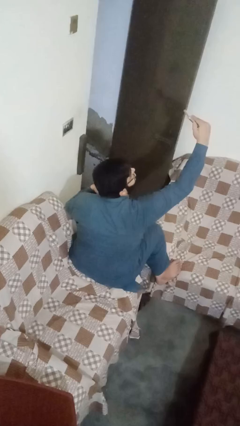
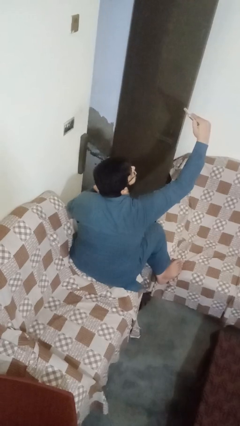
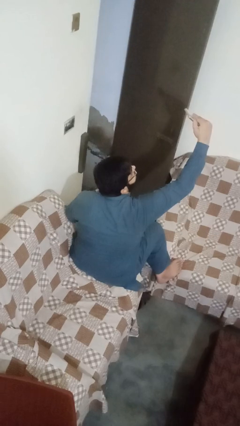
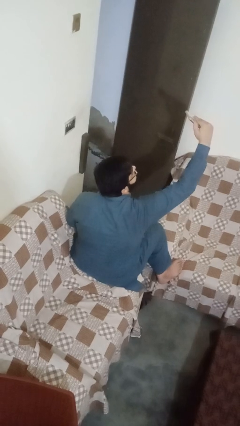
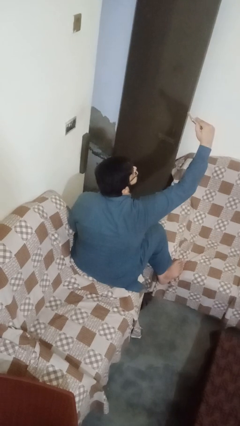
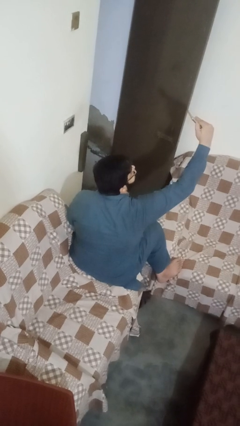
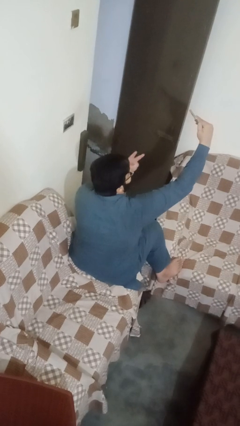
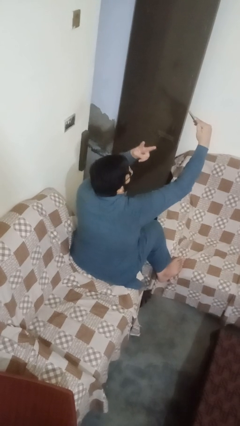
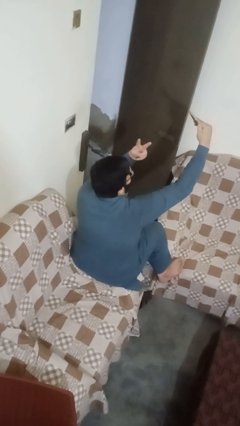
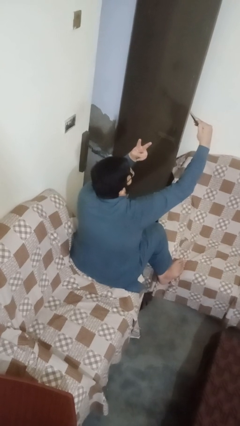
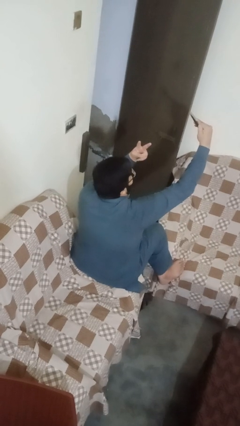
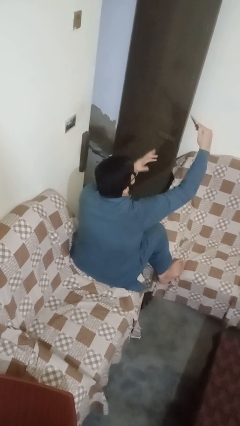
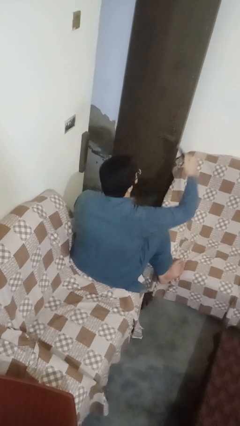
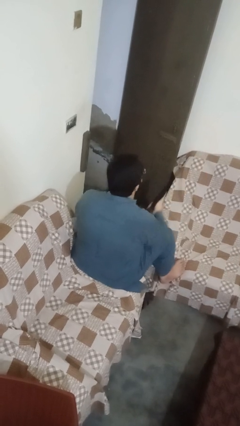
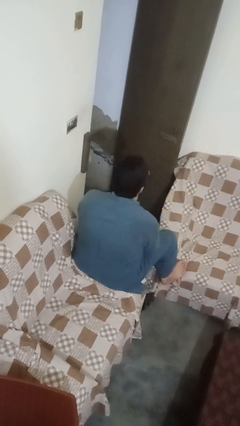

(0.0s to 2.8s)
person takes selfie

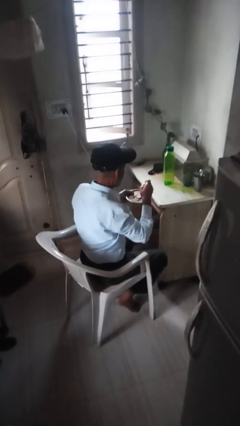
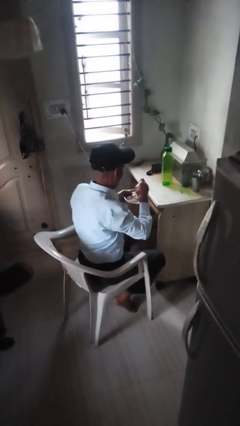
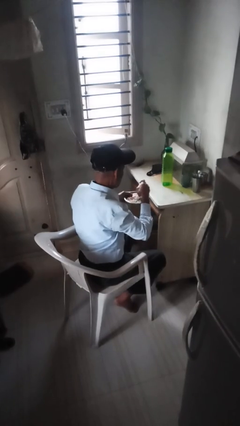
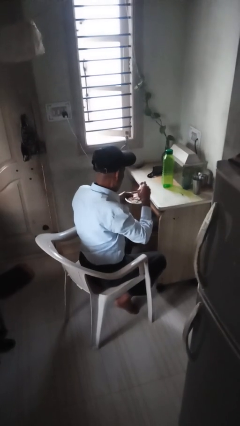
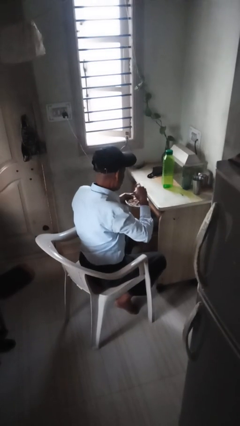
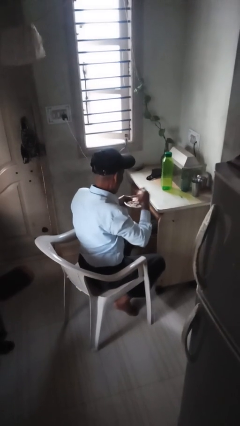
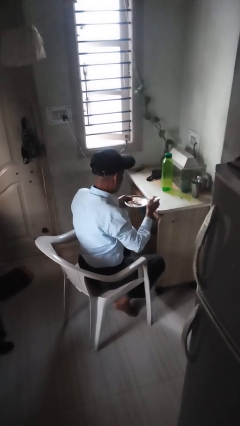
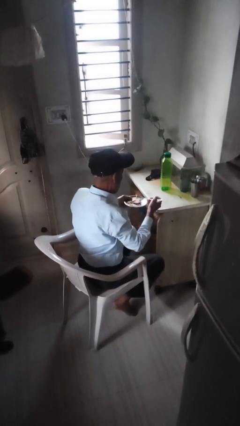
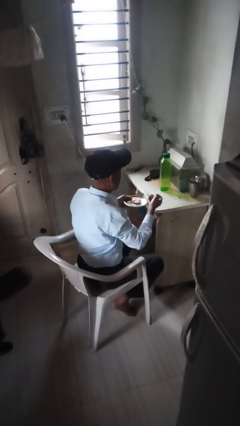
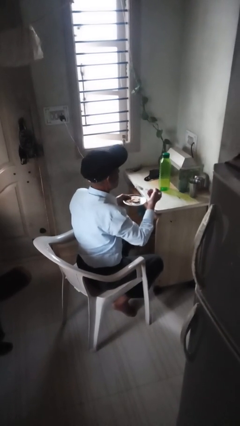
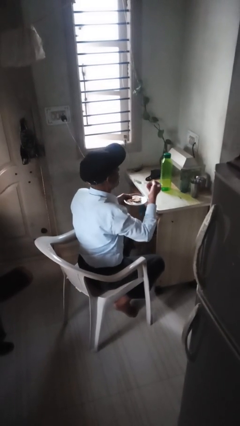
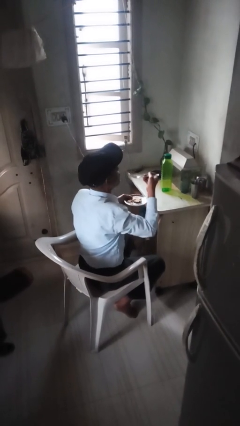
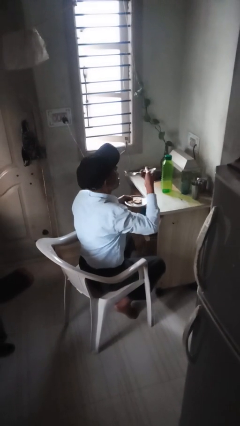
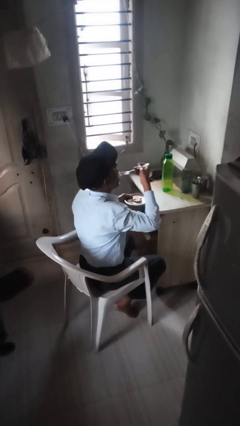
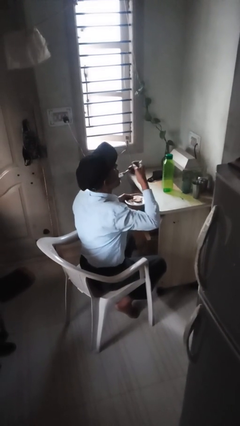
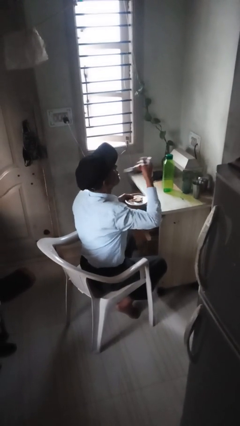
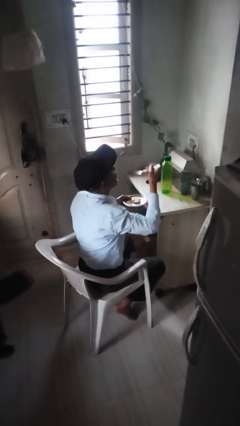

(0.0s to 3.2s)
person eats with utensil

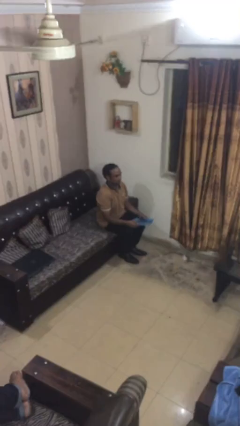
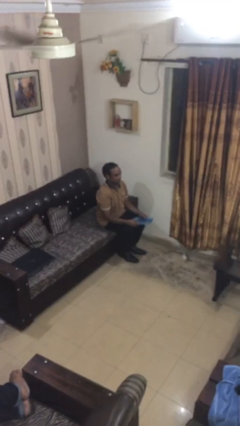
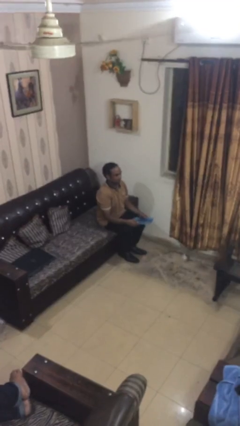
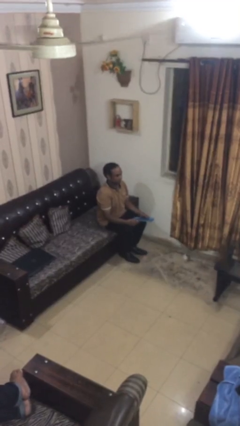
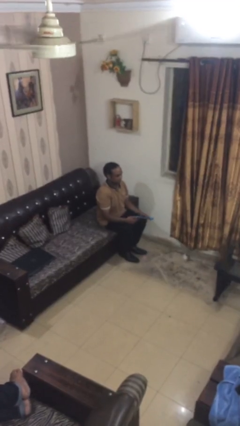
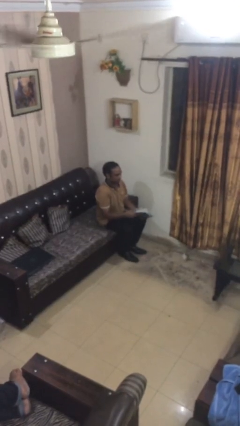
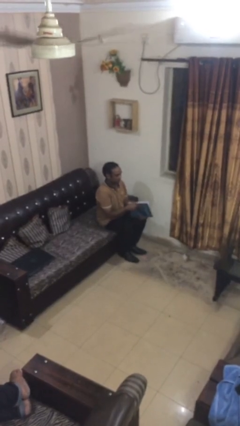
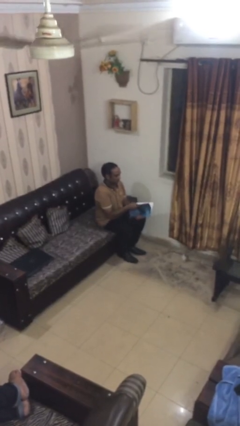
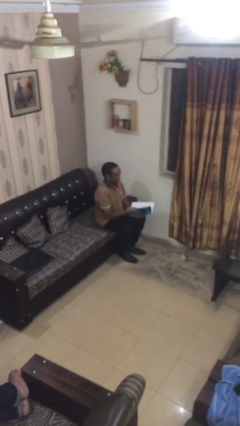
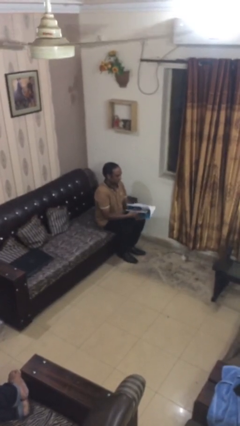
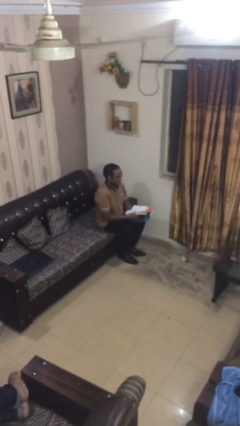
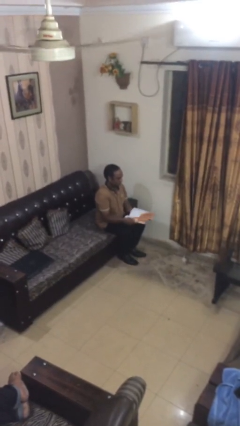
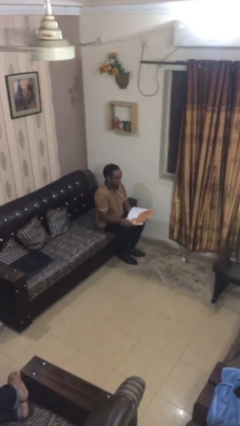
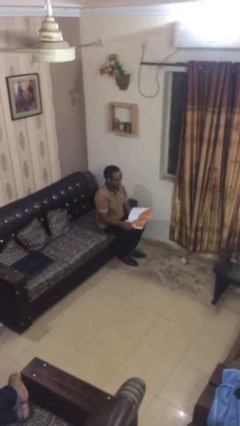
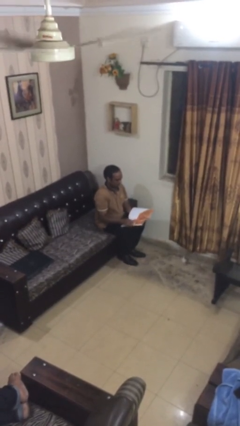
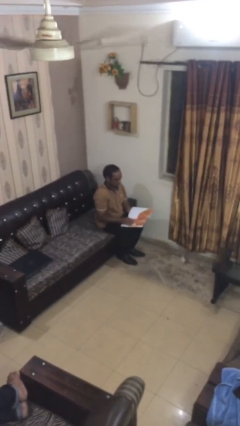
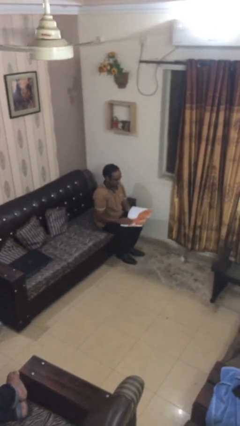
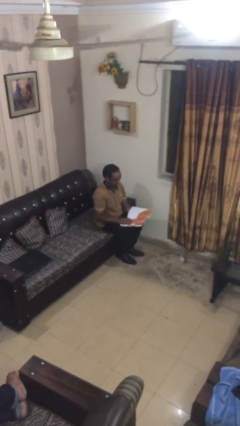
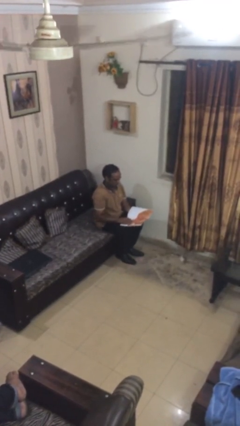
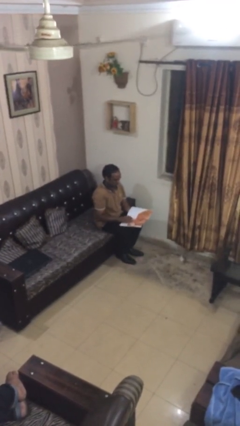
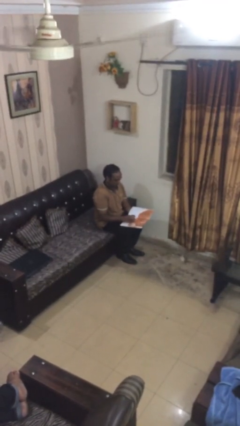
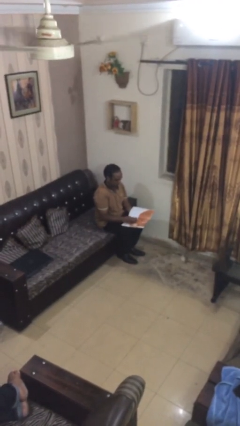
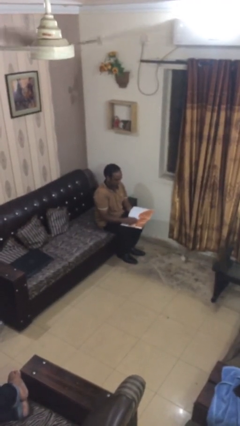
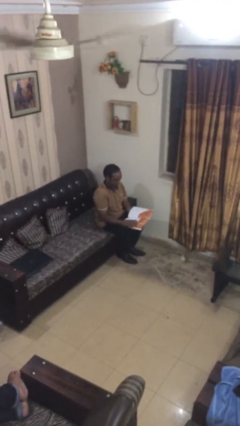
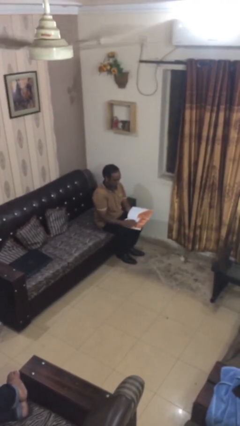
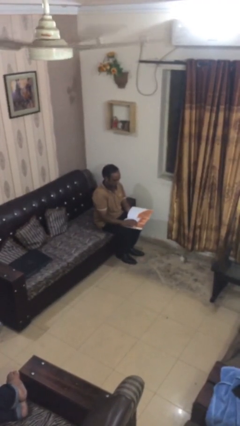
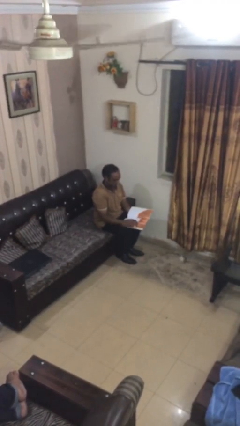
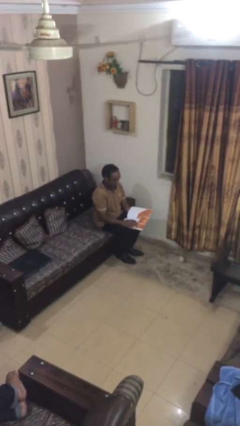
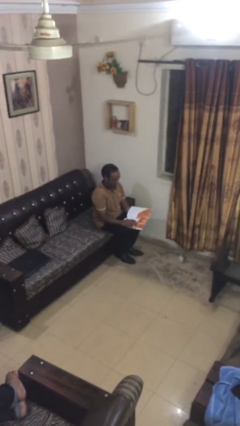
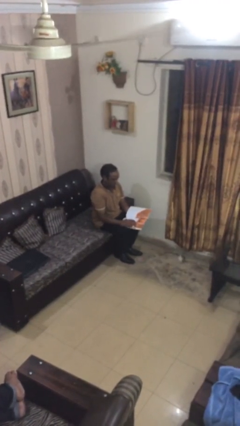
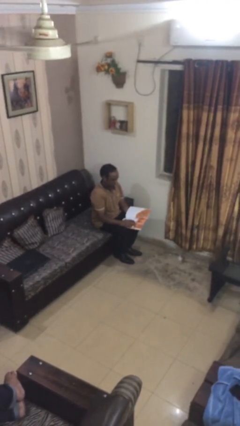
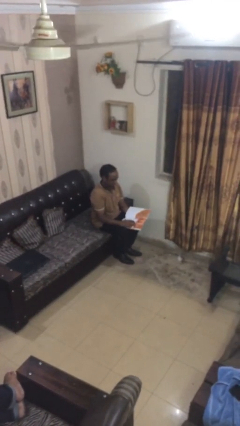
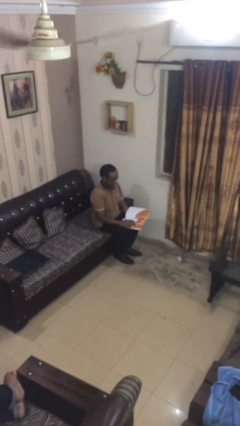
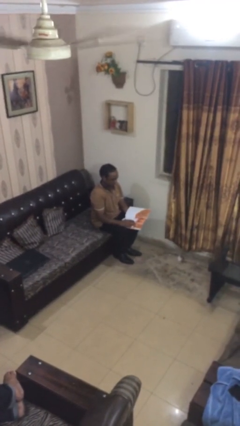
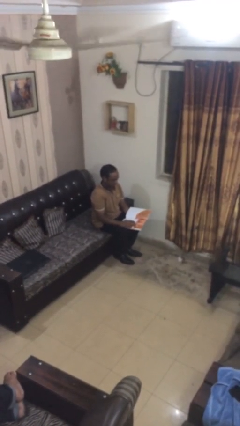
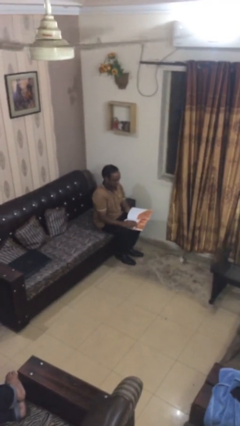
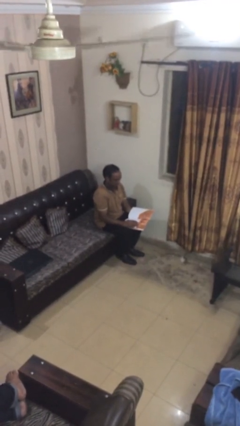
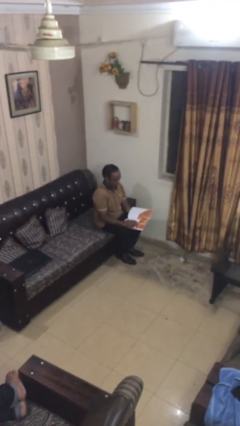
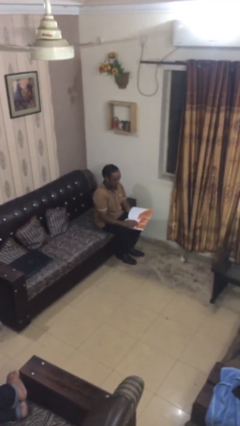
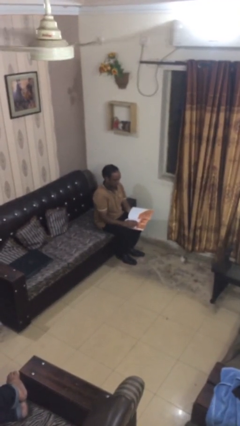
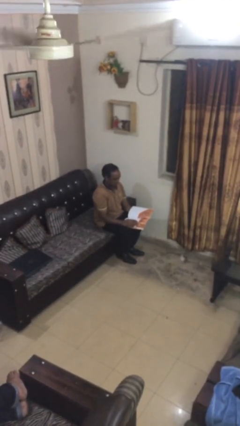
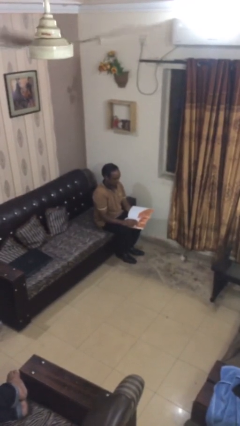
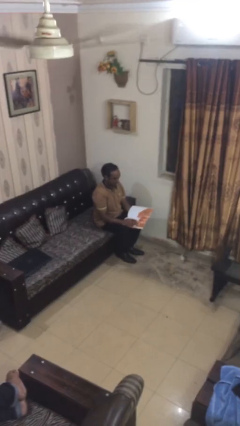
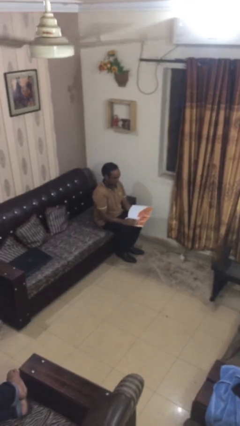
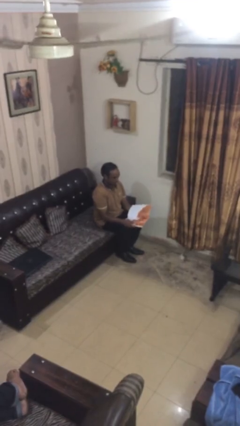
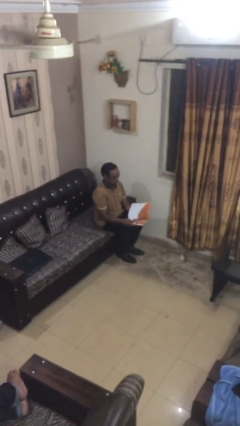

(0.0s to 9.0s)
person reads document

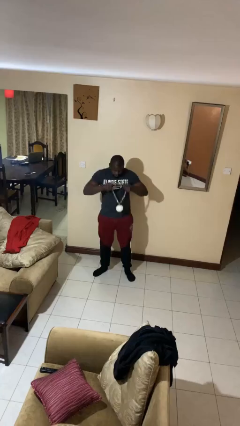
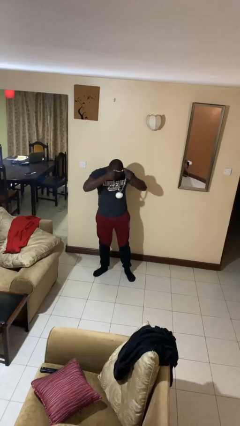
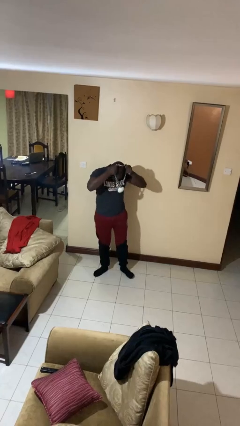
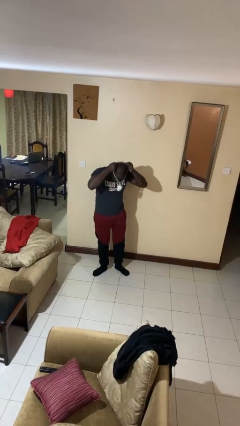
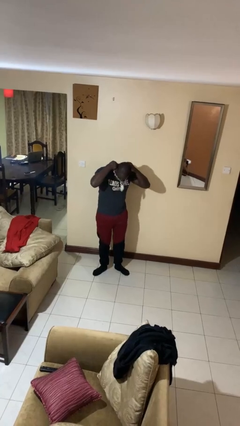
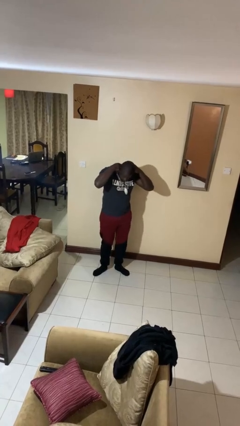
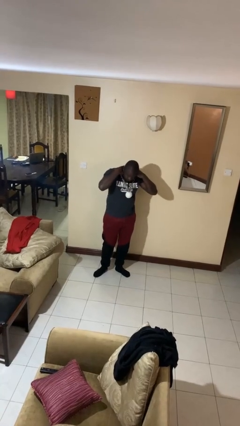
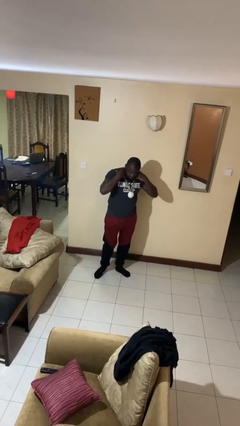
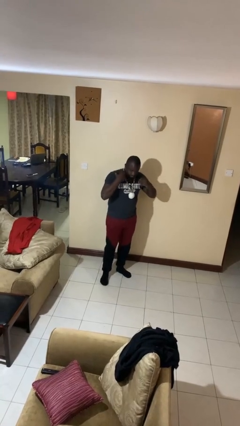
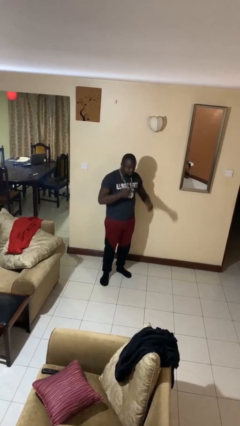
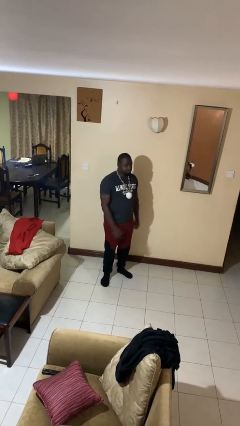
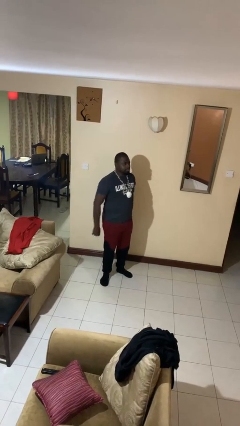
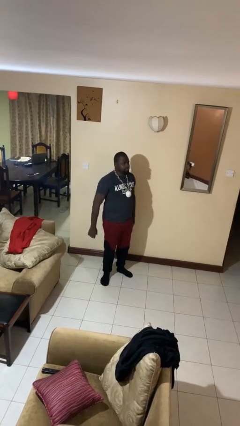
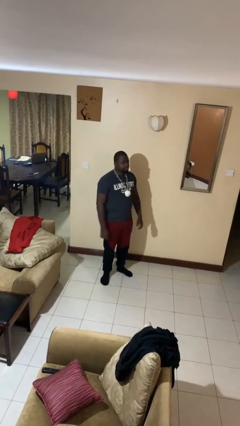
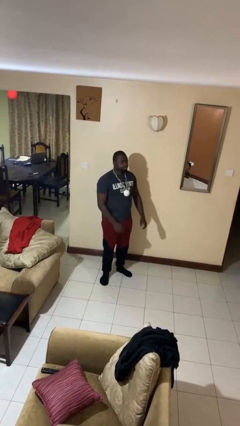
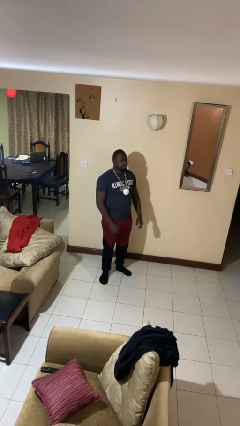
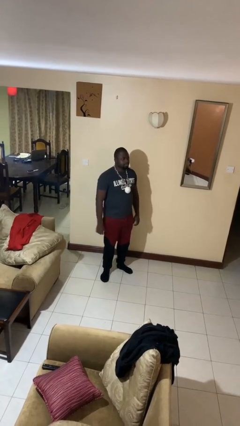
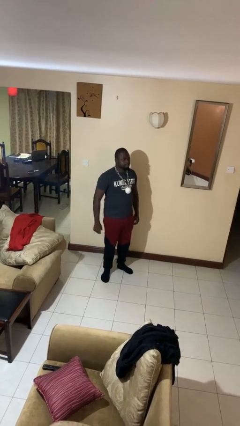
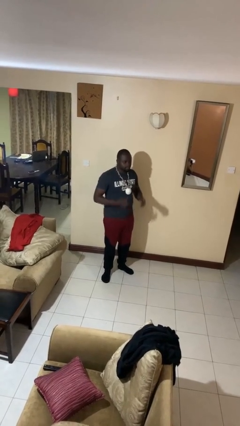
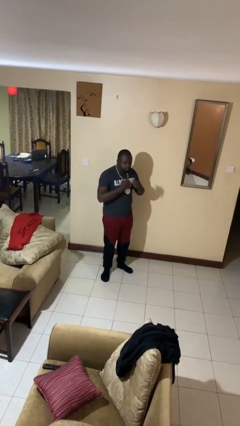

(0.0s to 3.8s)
person puts on necklace
